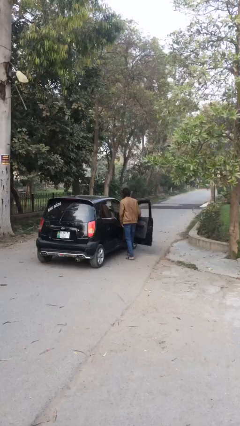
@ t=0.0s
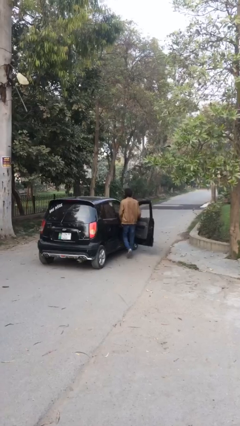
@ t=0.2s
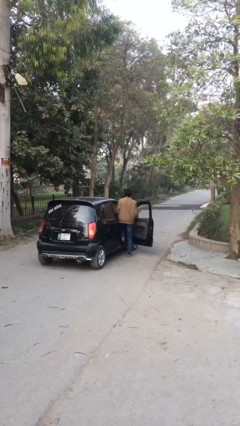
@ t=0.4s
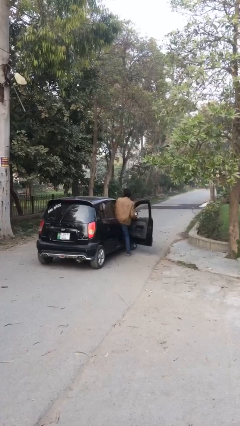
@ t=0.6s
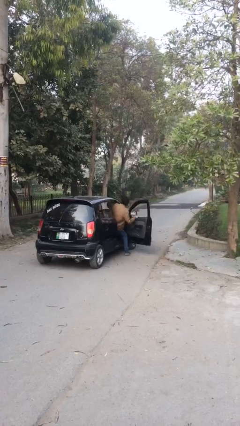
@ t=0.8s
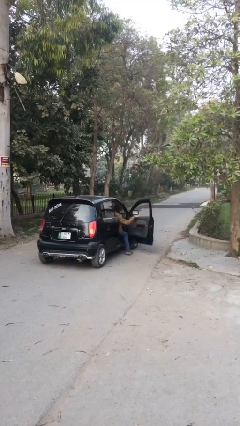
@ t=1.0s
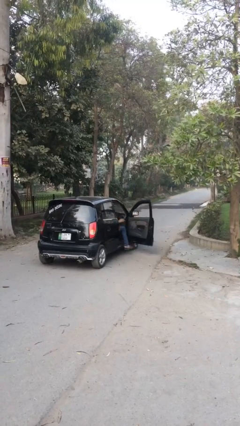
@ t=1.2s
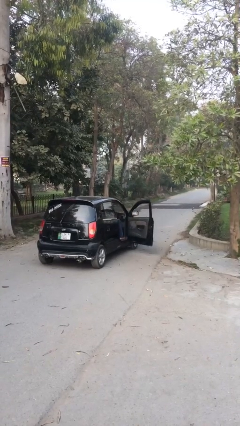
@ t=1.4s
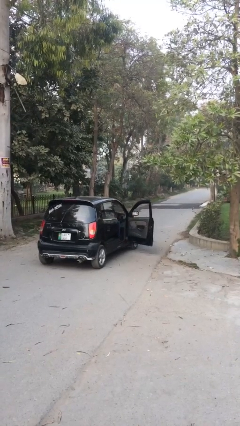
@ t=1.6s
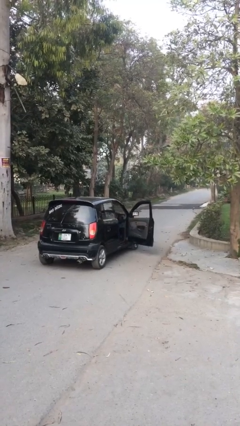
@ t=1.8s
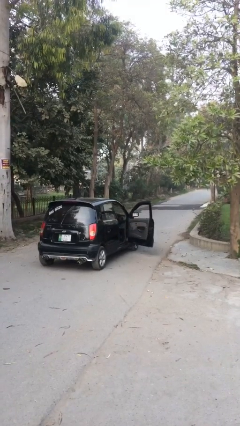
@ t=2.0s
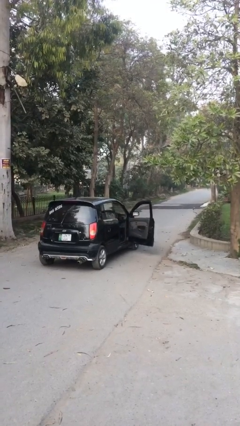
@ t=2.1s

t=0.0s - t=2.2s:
person enters car

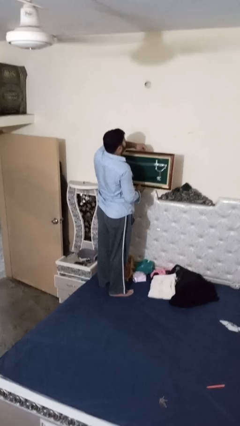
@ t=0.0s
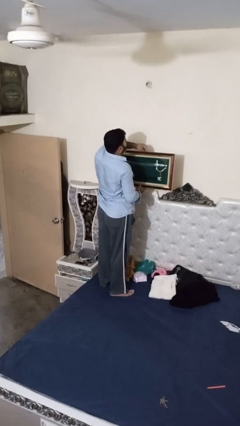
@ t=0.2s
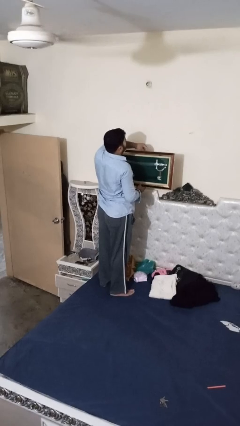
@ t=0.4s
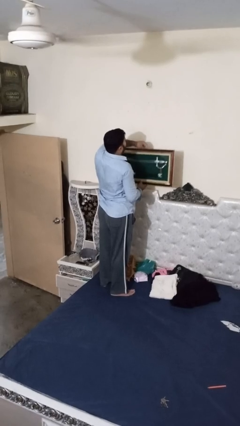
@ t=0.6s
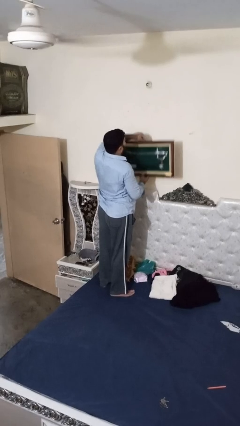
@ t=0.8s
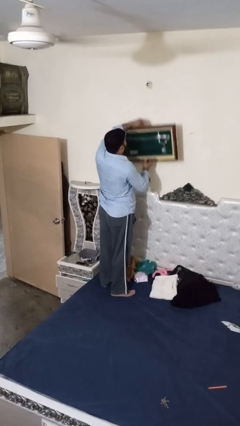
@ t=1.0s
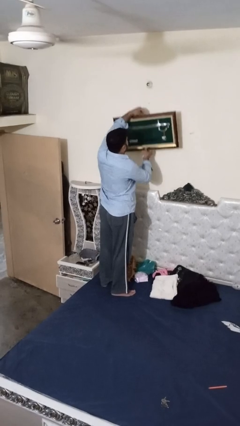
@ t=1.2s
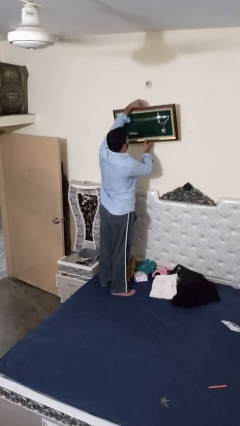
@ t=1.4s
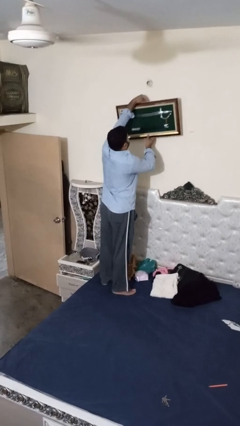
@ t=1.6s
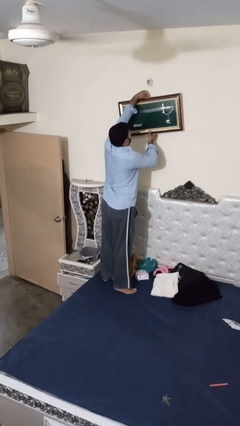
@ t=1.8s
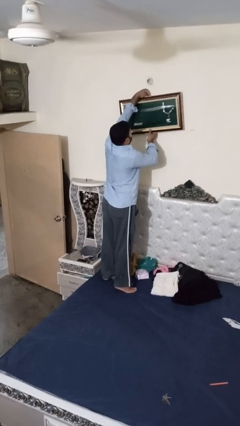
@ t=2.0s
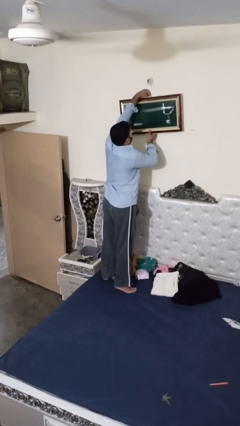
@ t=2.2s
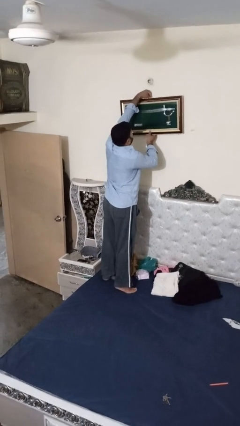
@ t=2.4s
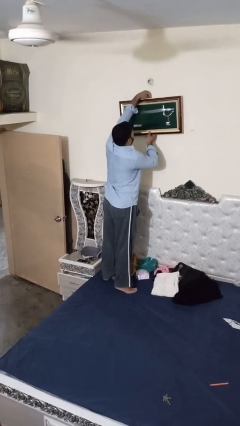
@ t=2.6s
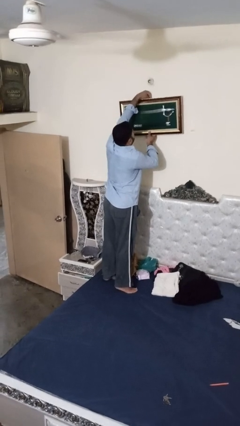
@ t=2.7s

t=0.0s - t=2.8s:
person puts up picture frame

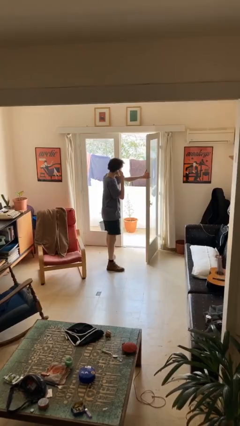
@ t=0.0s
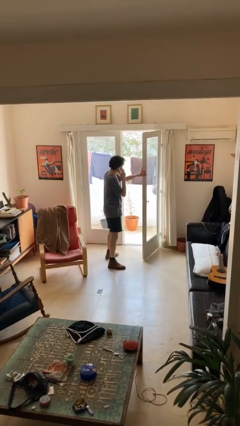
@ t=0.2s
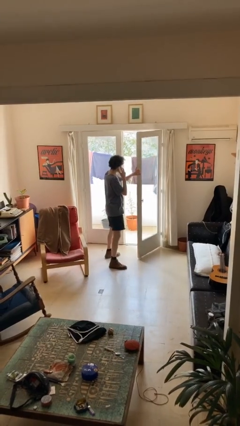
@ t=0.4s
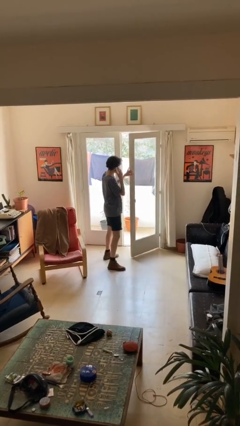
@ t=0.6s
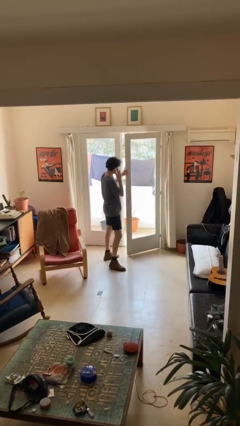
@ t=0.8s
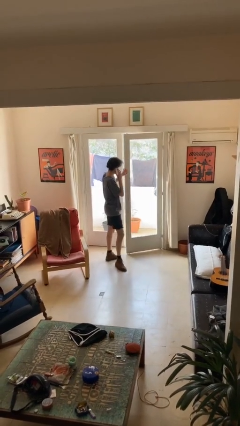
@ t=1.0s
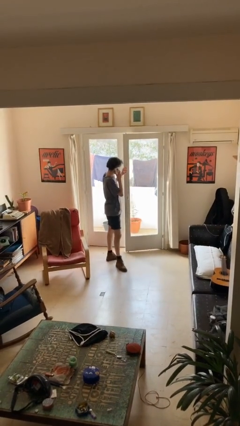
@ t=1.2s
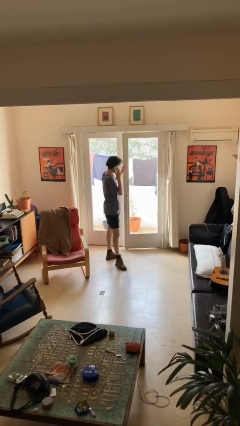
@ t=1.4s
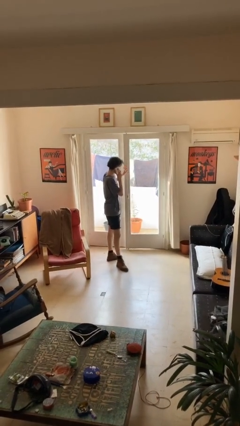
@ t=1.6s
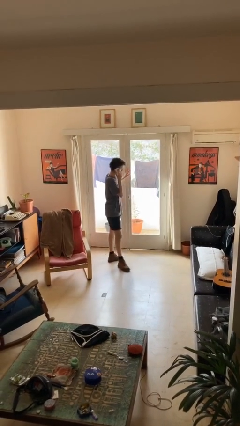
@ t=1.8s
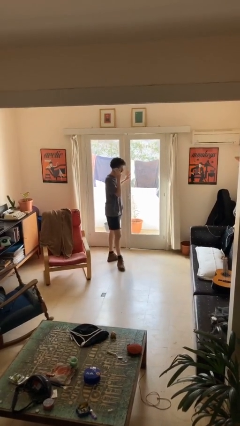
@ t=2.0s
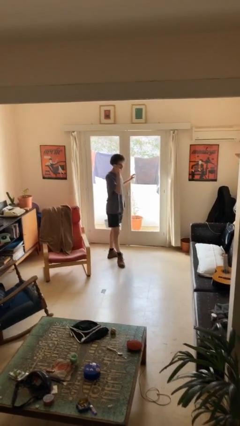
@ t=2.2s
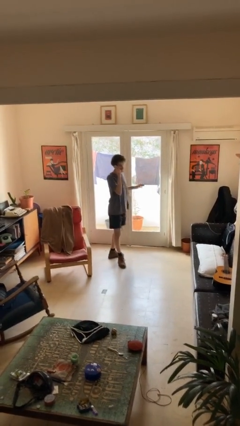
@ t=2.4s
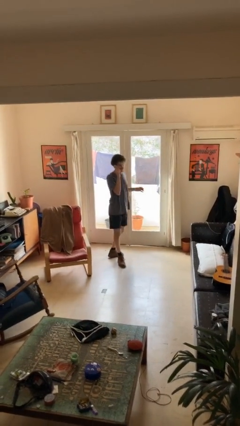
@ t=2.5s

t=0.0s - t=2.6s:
person closes facility door

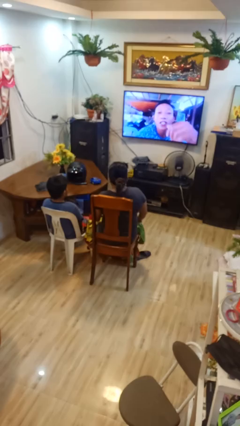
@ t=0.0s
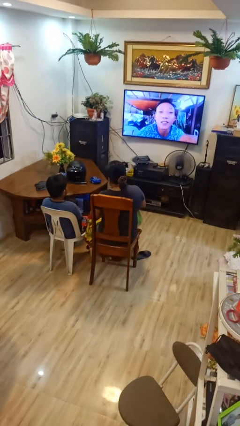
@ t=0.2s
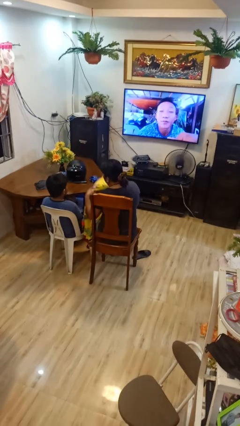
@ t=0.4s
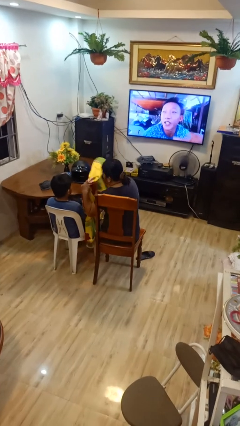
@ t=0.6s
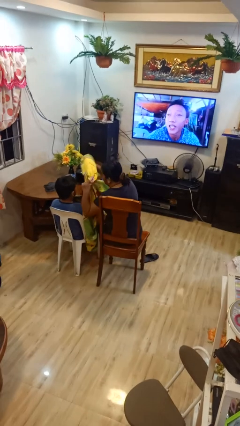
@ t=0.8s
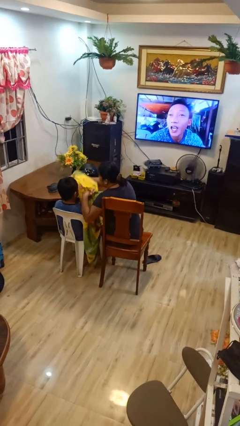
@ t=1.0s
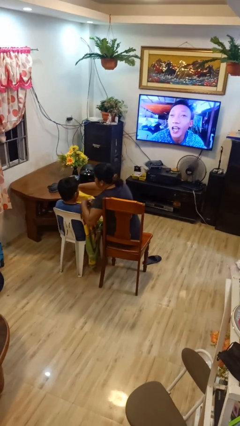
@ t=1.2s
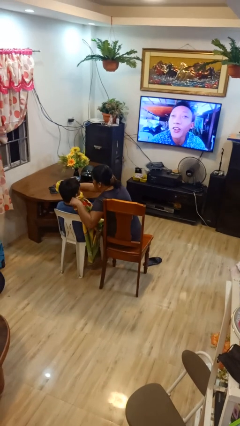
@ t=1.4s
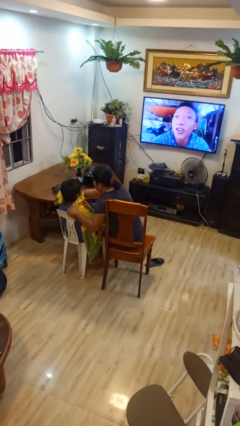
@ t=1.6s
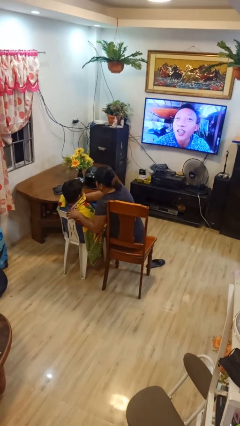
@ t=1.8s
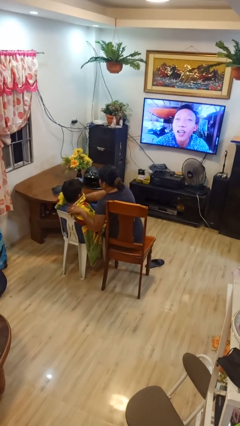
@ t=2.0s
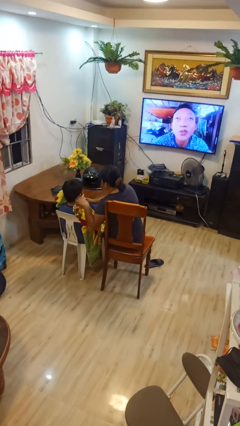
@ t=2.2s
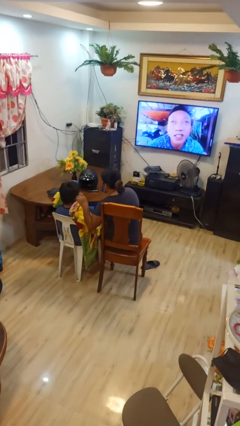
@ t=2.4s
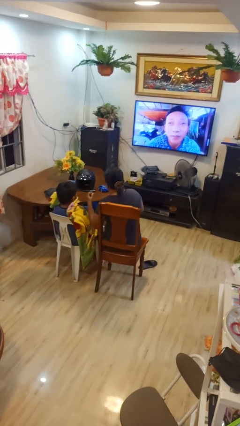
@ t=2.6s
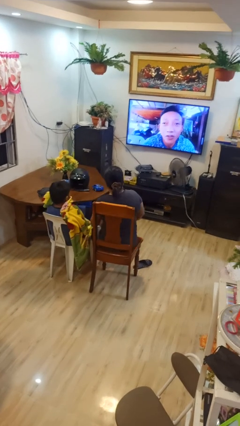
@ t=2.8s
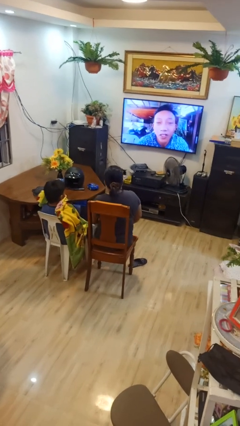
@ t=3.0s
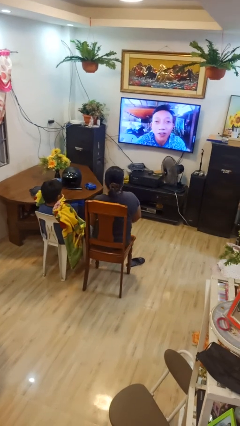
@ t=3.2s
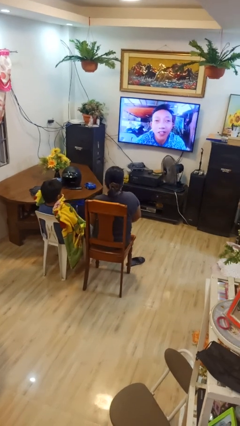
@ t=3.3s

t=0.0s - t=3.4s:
person covers friend with blanket

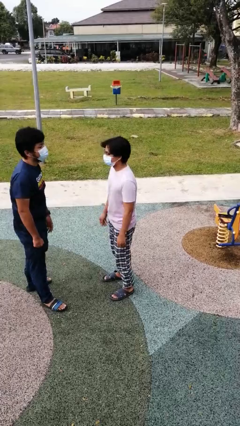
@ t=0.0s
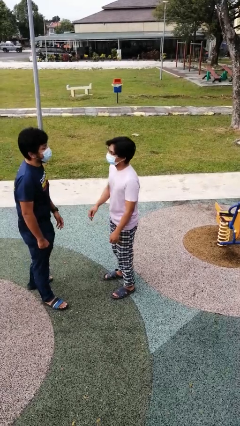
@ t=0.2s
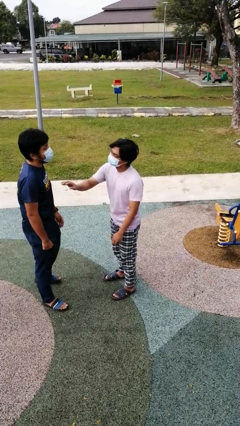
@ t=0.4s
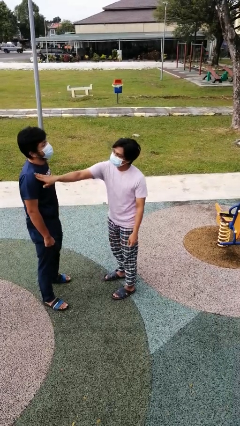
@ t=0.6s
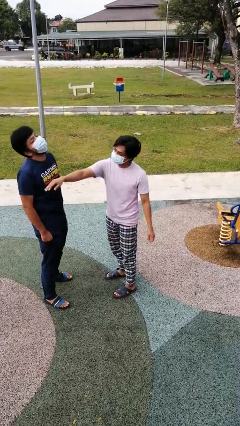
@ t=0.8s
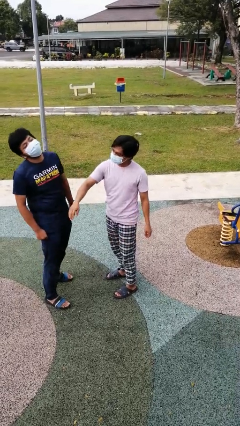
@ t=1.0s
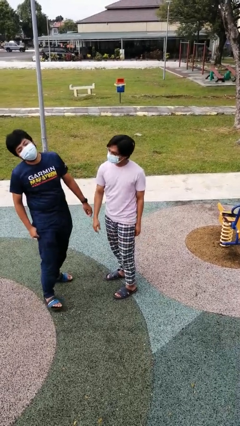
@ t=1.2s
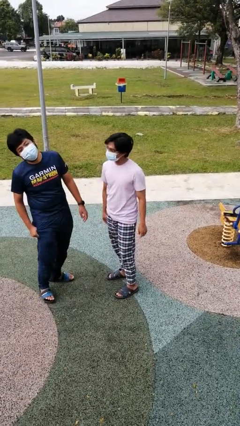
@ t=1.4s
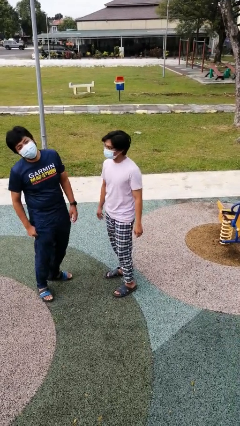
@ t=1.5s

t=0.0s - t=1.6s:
person shoves person

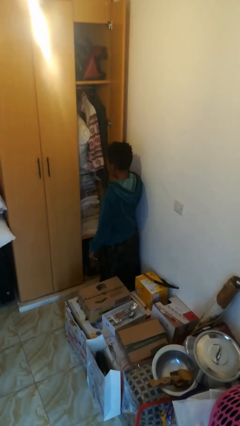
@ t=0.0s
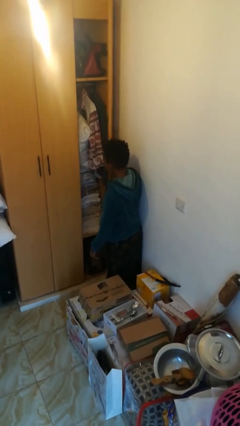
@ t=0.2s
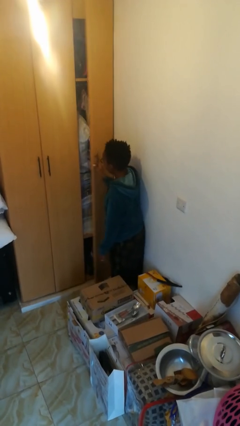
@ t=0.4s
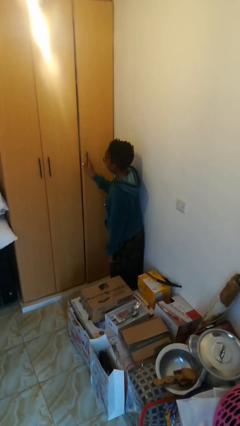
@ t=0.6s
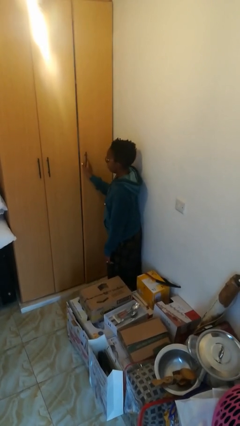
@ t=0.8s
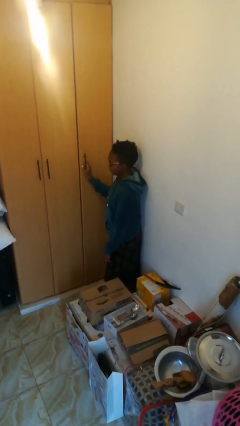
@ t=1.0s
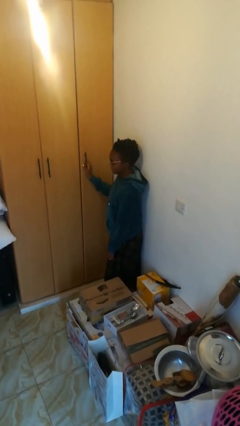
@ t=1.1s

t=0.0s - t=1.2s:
person closes closet door

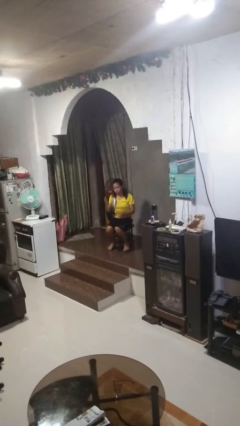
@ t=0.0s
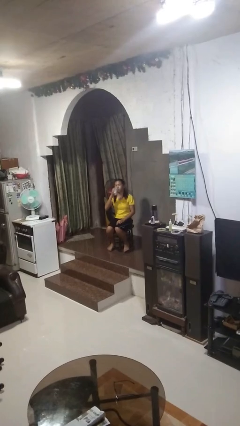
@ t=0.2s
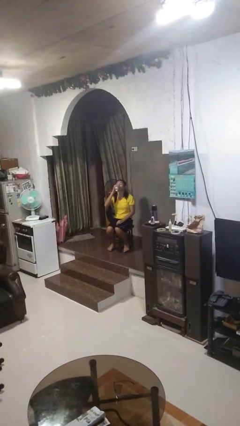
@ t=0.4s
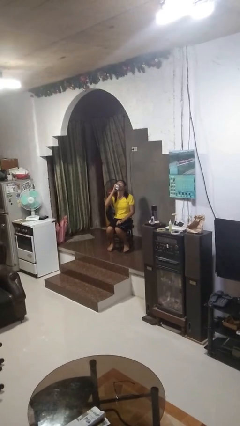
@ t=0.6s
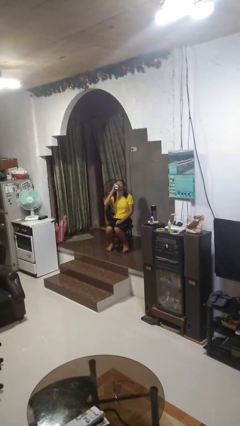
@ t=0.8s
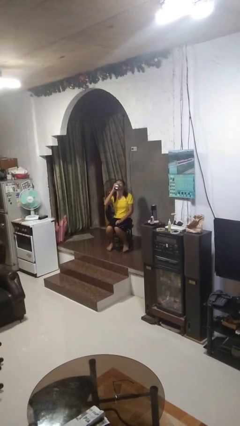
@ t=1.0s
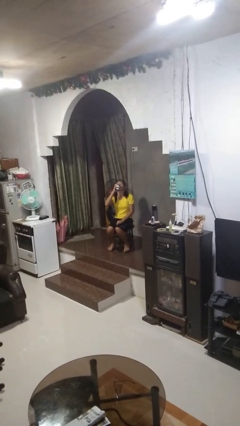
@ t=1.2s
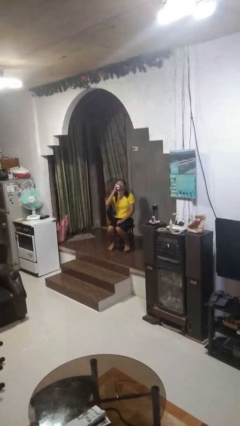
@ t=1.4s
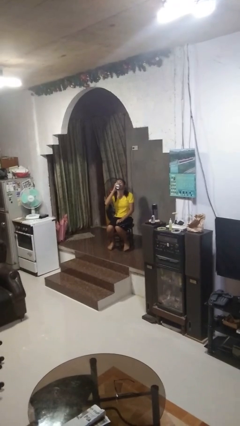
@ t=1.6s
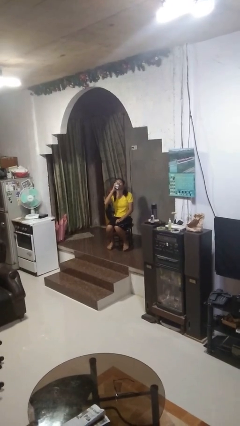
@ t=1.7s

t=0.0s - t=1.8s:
person drinks from beverage can

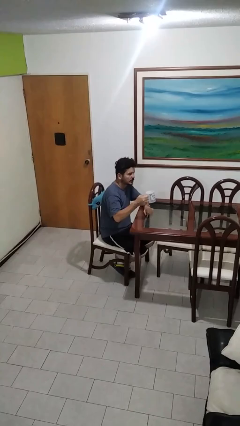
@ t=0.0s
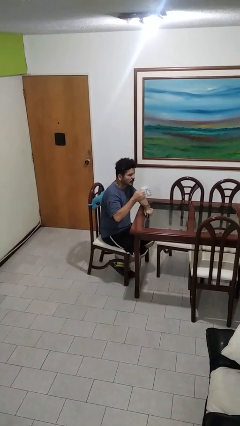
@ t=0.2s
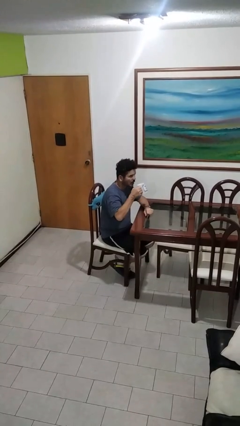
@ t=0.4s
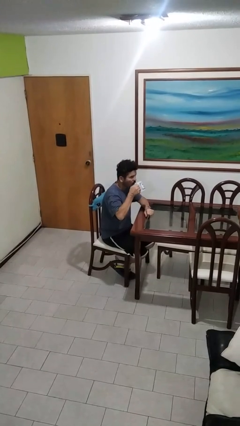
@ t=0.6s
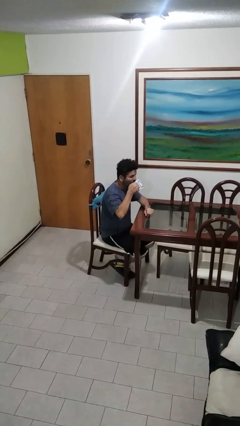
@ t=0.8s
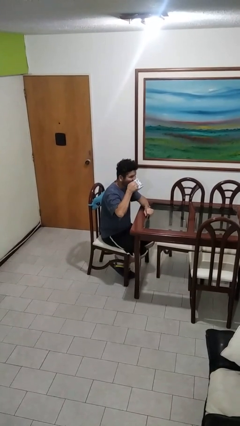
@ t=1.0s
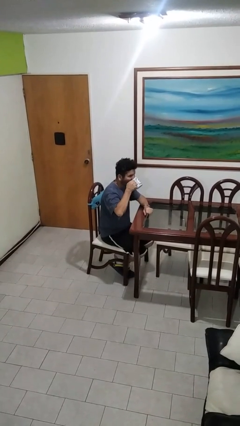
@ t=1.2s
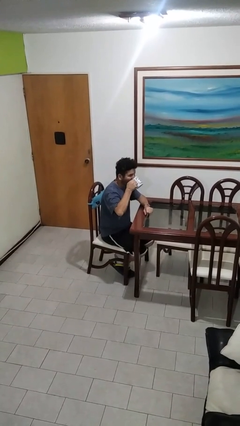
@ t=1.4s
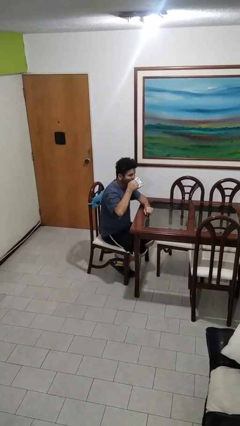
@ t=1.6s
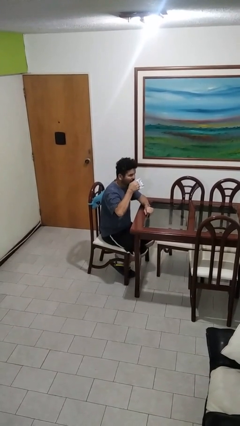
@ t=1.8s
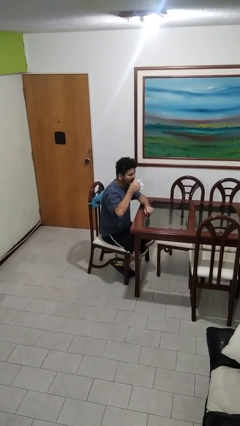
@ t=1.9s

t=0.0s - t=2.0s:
person drinks from mug
